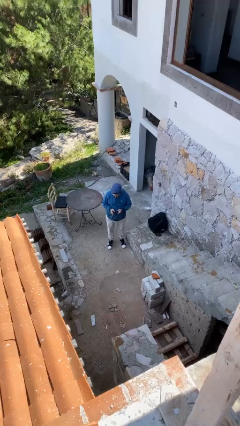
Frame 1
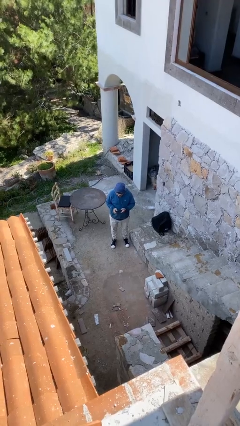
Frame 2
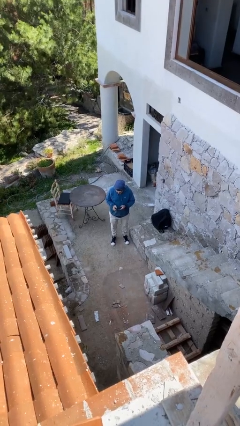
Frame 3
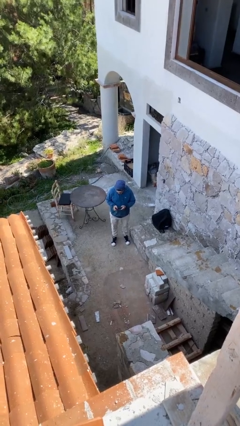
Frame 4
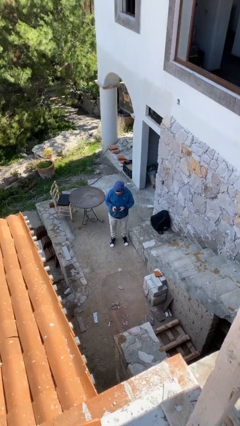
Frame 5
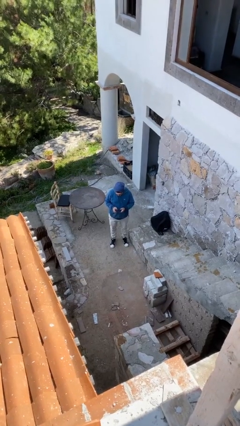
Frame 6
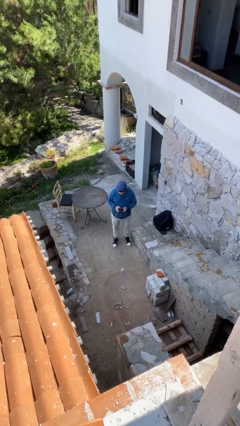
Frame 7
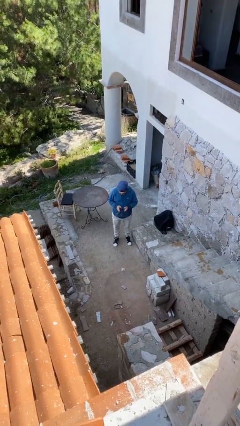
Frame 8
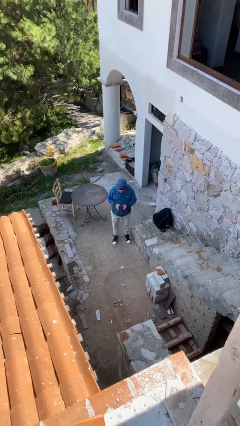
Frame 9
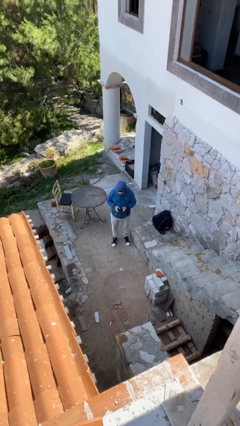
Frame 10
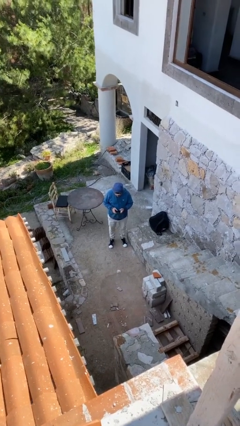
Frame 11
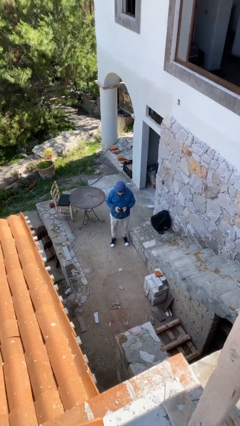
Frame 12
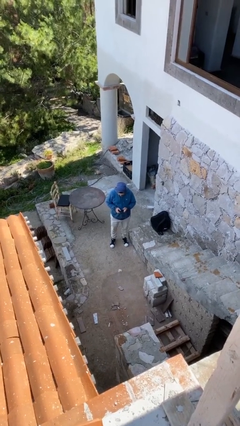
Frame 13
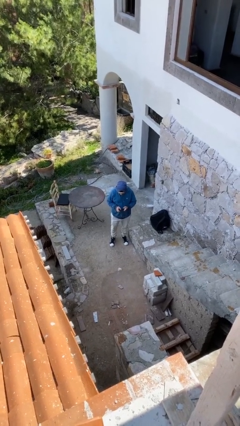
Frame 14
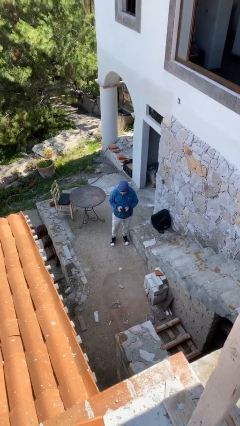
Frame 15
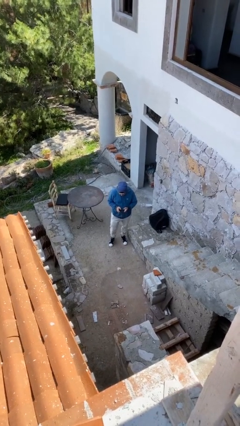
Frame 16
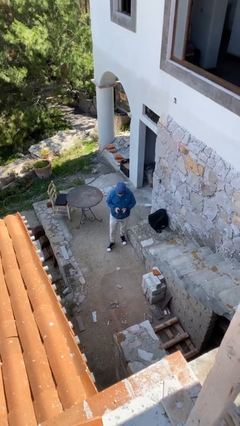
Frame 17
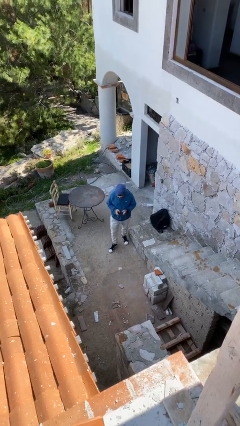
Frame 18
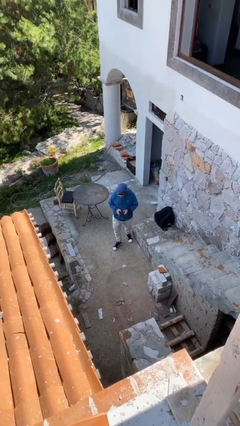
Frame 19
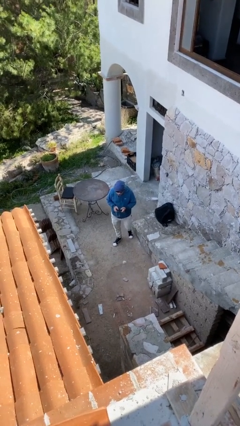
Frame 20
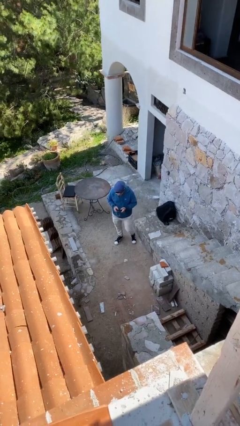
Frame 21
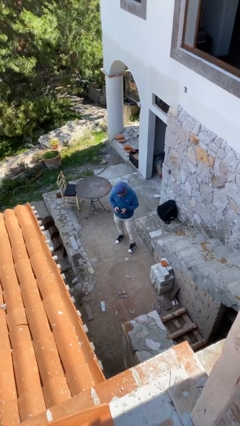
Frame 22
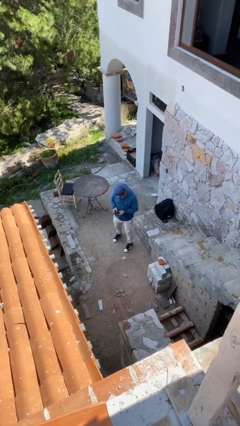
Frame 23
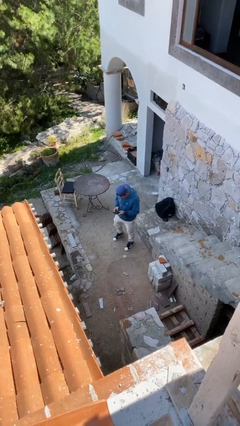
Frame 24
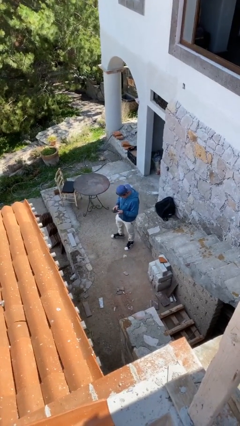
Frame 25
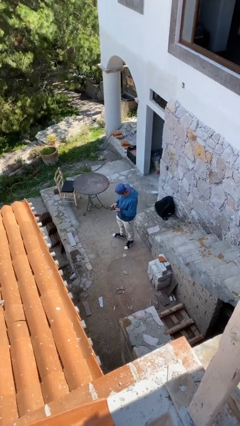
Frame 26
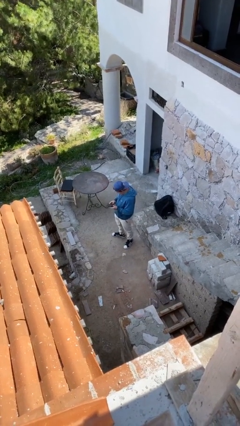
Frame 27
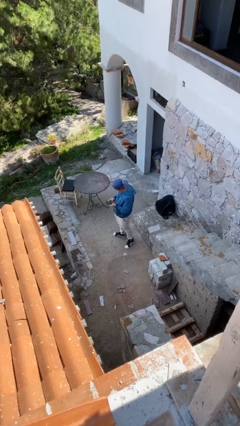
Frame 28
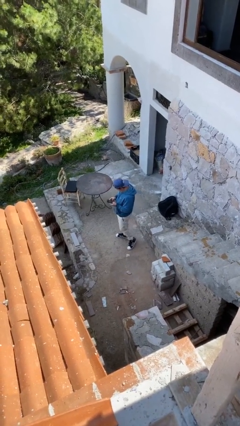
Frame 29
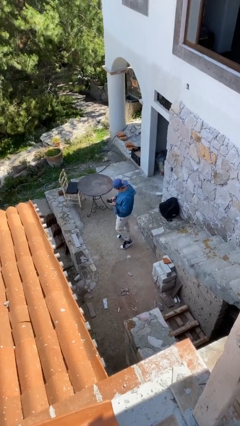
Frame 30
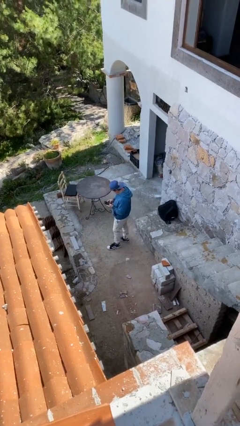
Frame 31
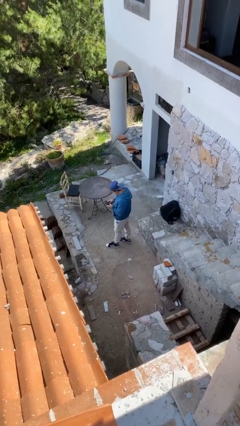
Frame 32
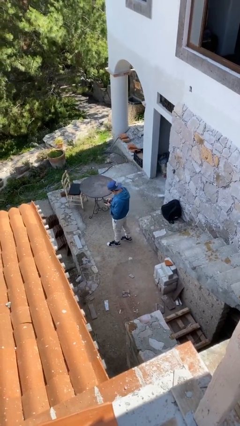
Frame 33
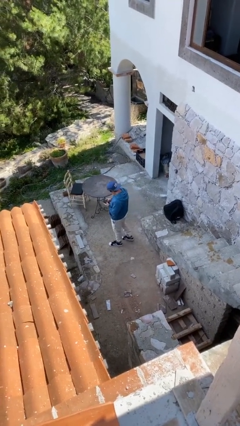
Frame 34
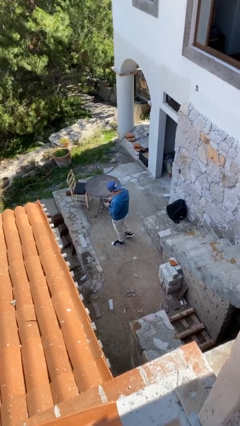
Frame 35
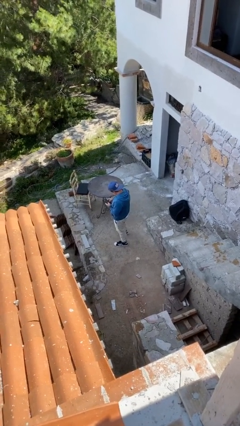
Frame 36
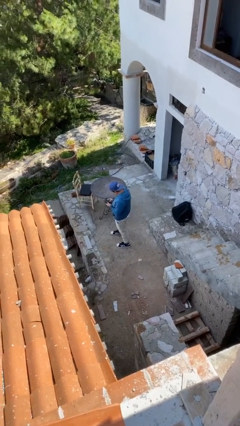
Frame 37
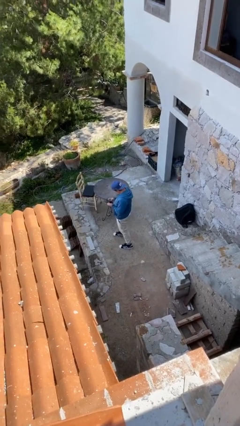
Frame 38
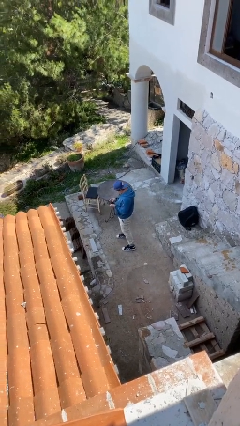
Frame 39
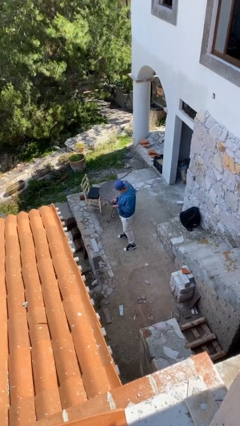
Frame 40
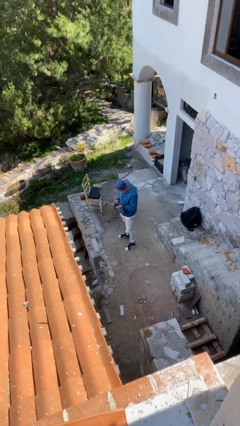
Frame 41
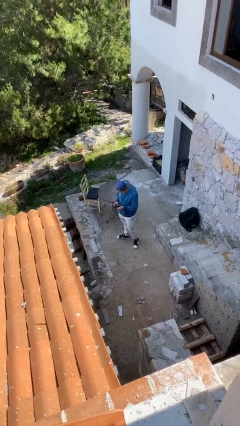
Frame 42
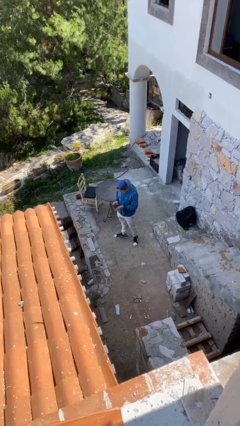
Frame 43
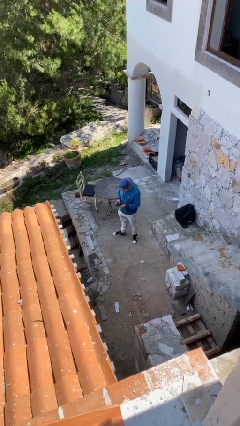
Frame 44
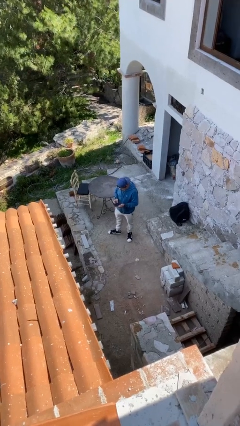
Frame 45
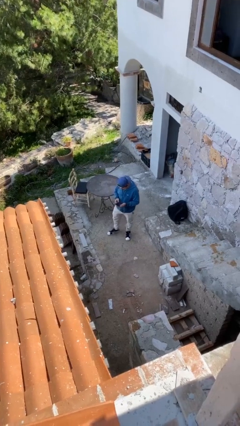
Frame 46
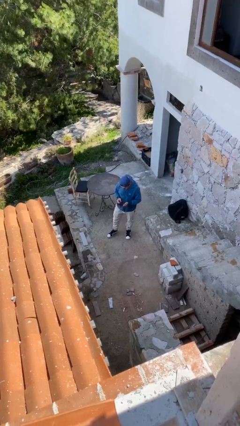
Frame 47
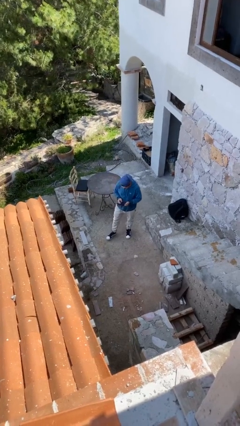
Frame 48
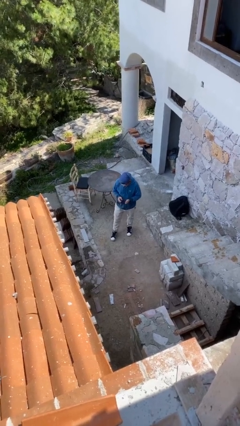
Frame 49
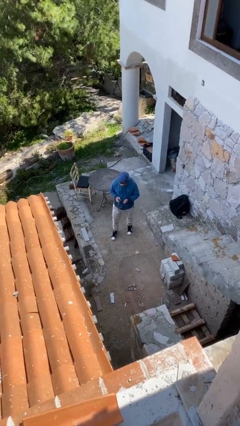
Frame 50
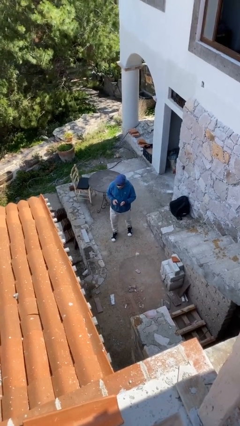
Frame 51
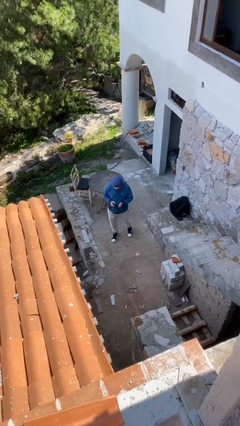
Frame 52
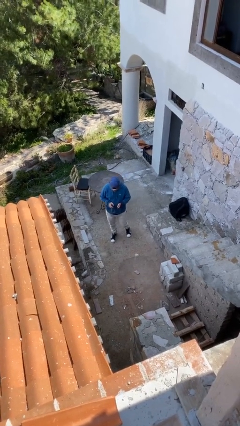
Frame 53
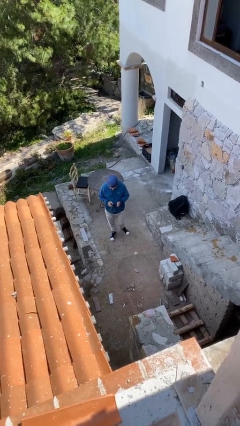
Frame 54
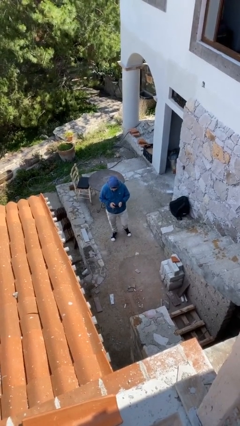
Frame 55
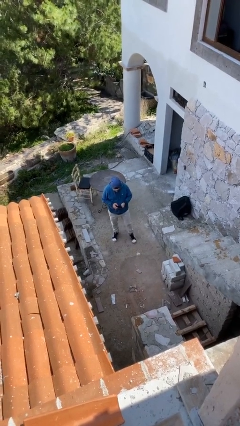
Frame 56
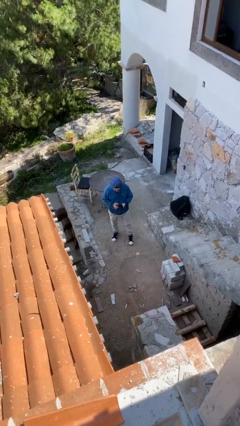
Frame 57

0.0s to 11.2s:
person texts on phone

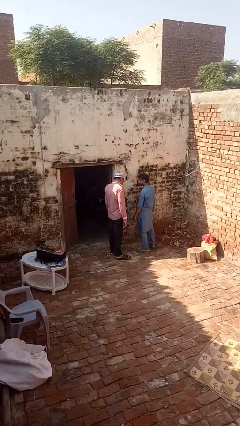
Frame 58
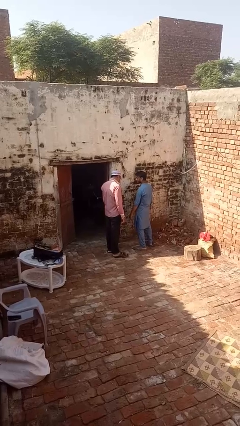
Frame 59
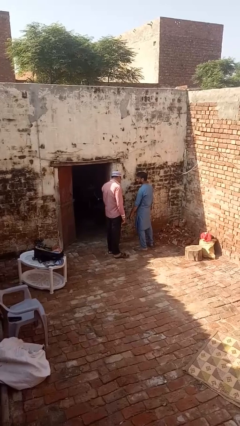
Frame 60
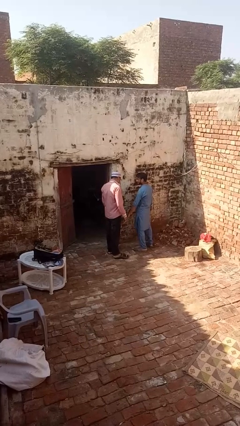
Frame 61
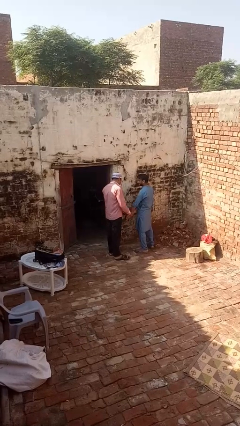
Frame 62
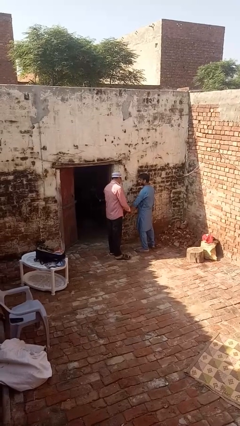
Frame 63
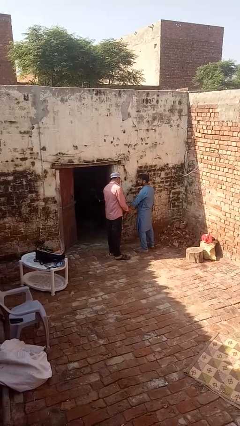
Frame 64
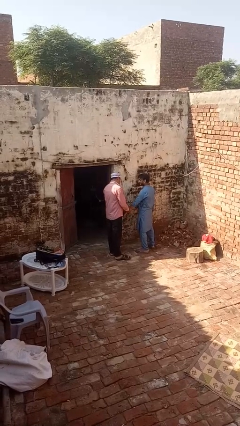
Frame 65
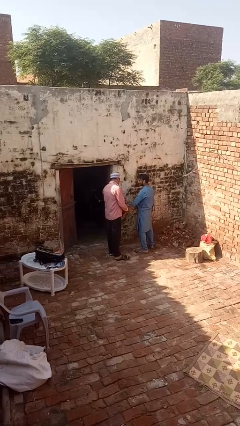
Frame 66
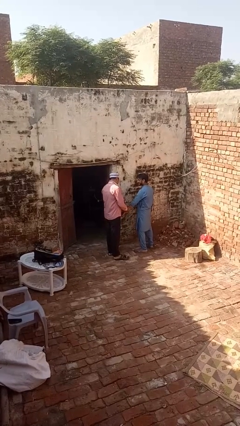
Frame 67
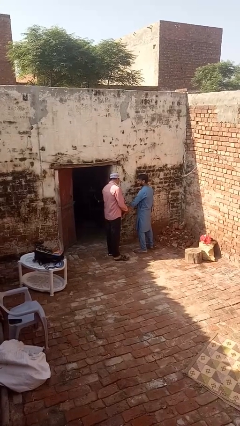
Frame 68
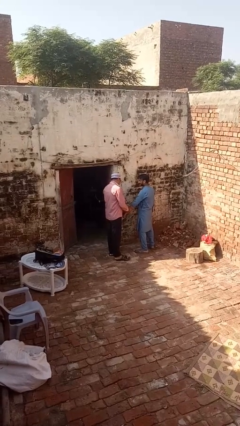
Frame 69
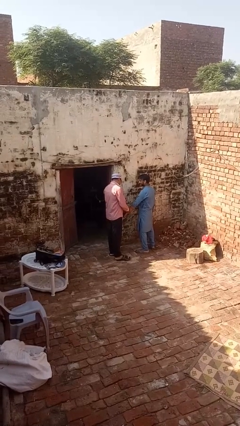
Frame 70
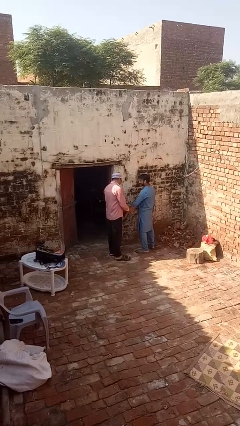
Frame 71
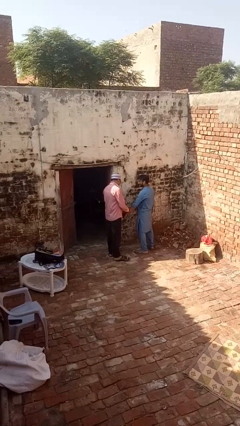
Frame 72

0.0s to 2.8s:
person grabs person by forearm

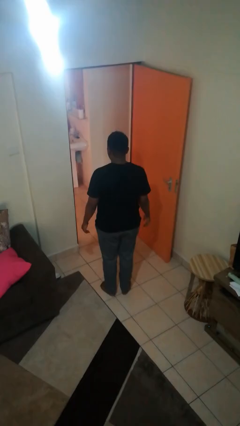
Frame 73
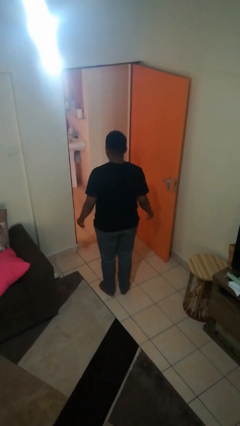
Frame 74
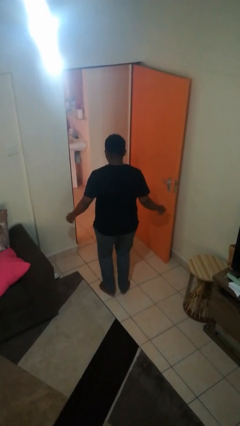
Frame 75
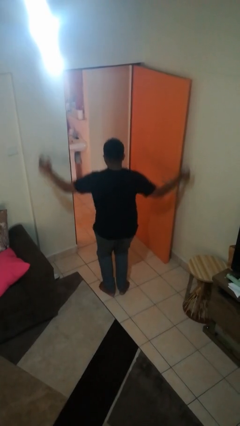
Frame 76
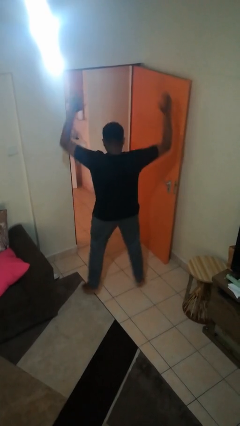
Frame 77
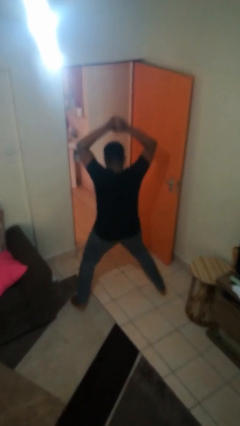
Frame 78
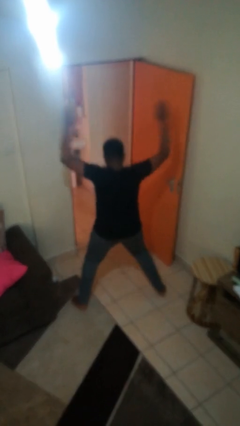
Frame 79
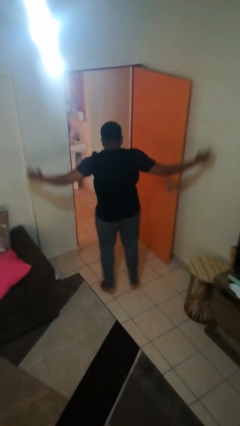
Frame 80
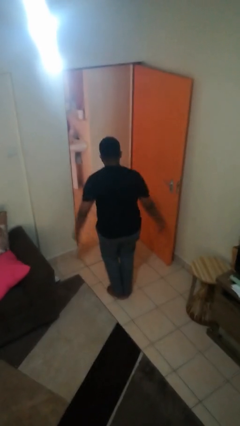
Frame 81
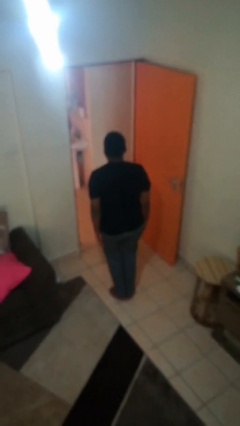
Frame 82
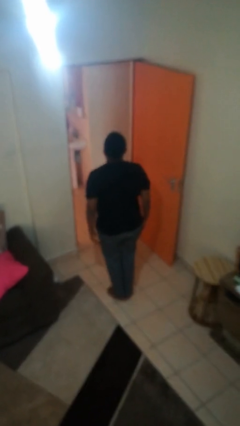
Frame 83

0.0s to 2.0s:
person exercises with jumping jacks

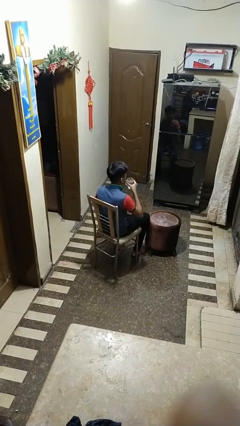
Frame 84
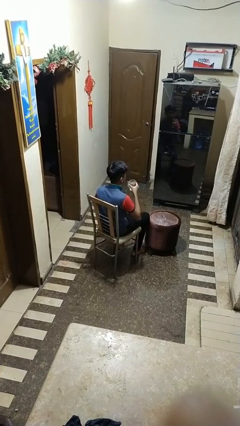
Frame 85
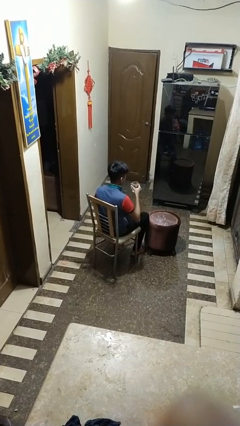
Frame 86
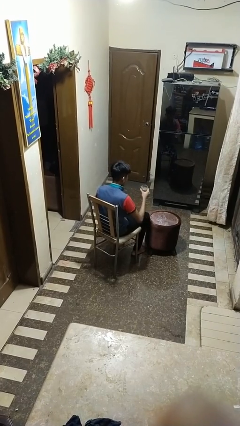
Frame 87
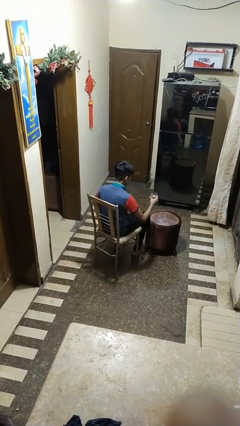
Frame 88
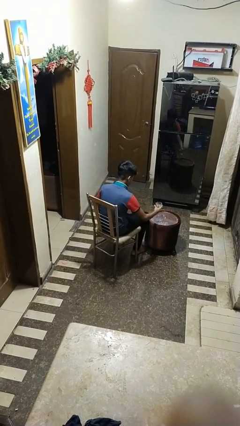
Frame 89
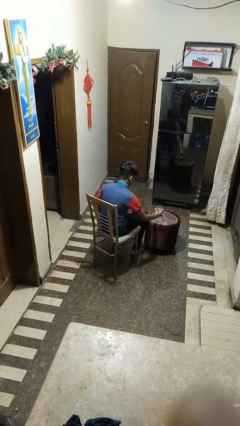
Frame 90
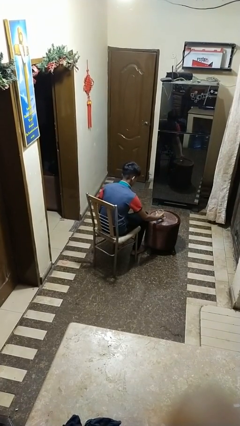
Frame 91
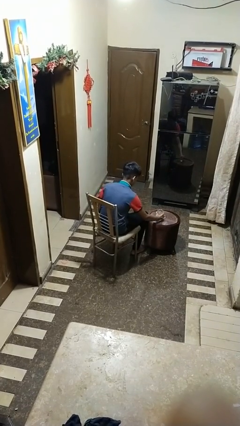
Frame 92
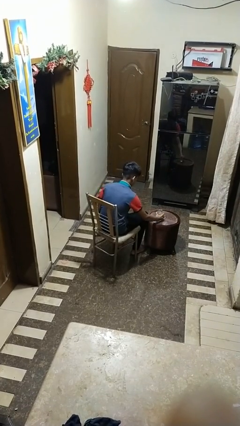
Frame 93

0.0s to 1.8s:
person puts down object on table

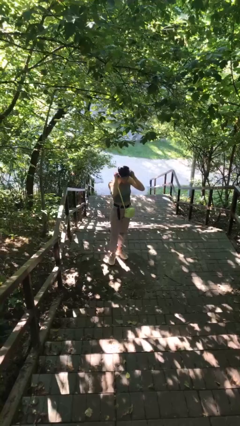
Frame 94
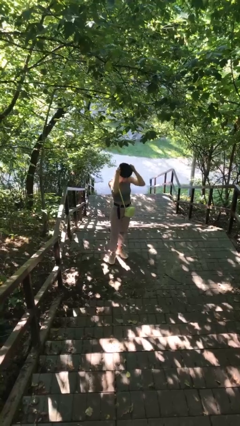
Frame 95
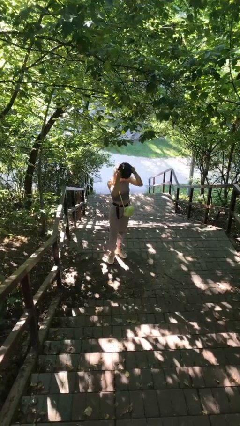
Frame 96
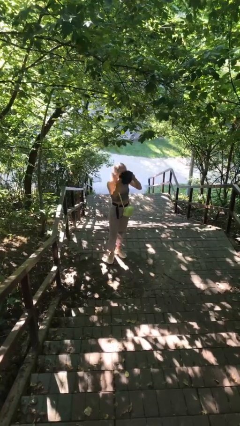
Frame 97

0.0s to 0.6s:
person takes off hat
